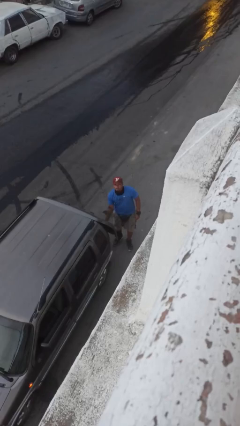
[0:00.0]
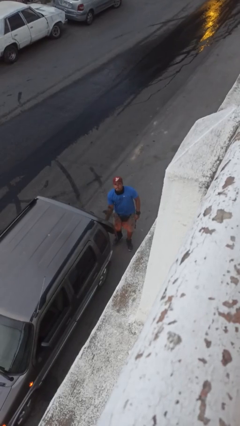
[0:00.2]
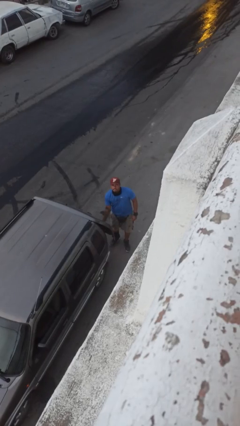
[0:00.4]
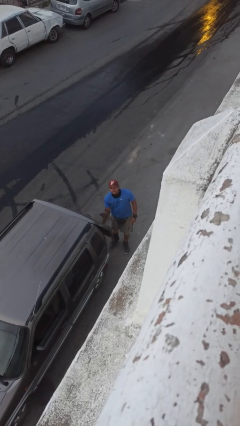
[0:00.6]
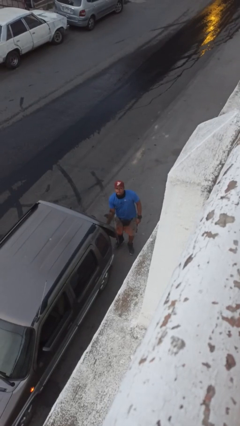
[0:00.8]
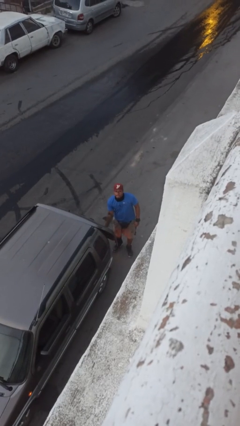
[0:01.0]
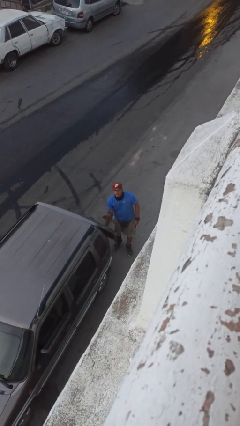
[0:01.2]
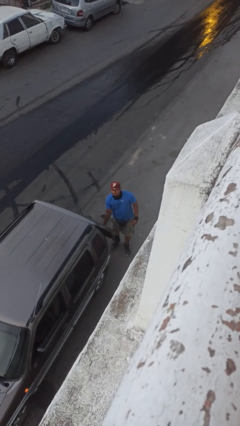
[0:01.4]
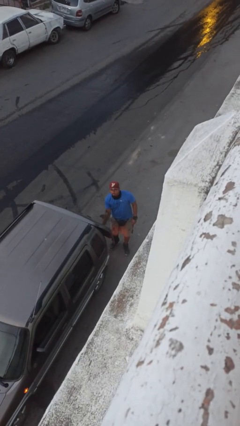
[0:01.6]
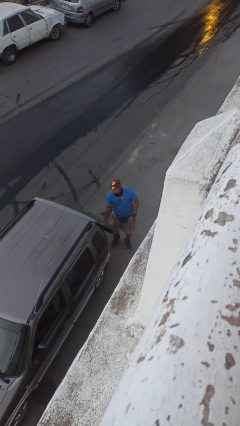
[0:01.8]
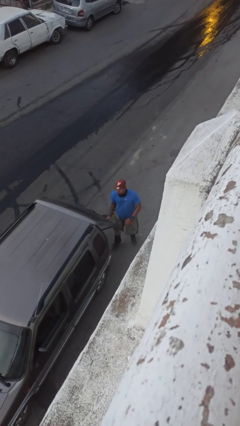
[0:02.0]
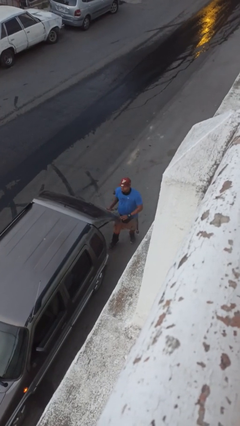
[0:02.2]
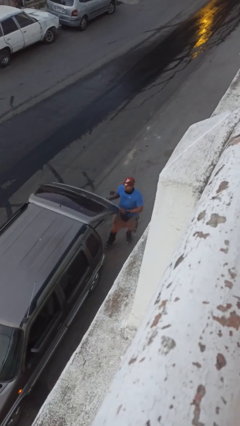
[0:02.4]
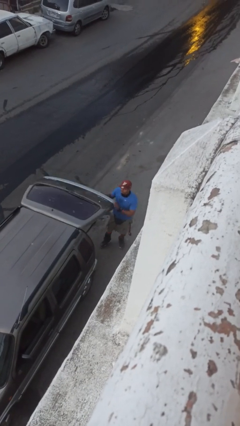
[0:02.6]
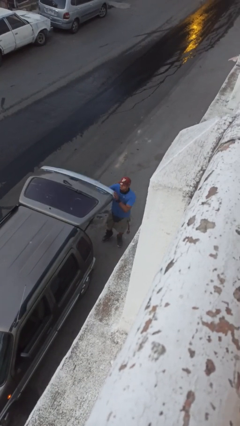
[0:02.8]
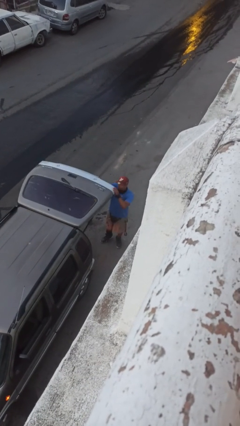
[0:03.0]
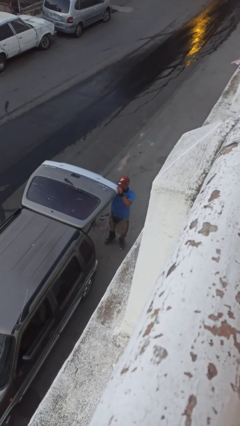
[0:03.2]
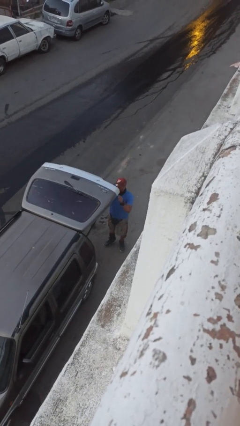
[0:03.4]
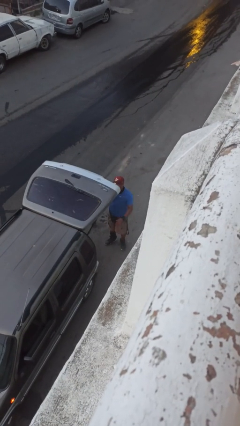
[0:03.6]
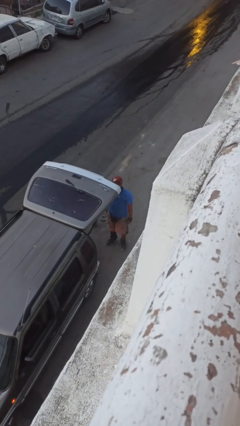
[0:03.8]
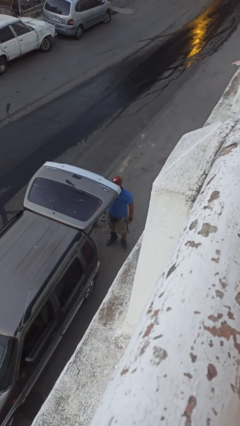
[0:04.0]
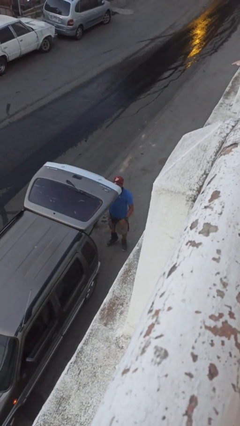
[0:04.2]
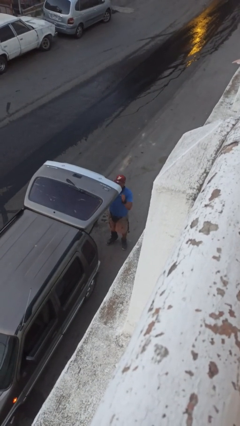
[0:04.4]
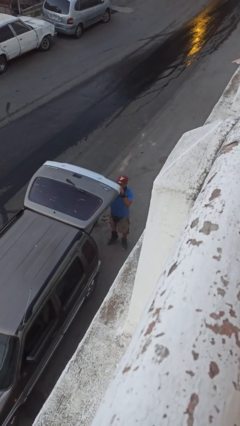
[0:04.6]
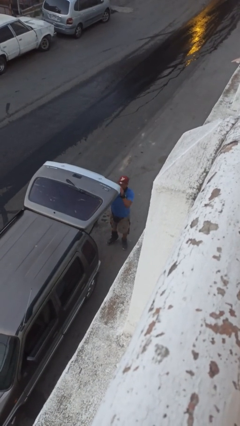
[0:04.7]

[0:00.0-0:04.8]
person opens car trunk

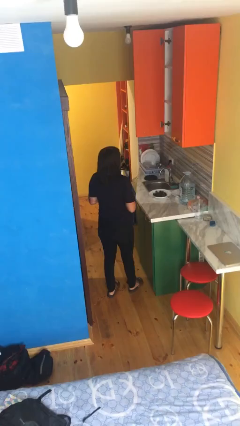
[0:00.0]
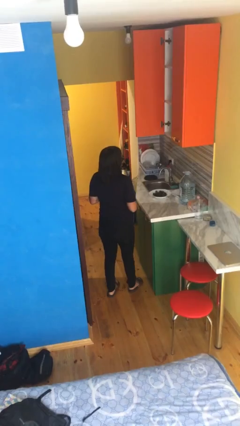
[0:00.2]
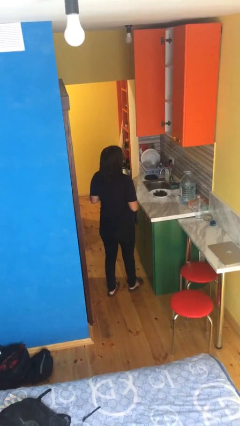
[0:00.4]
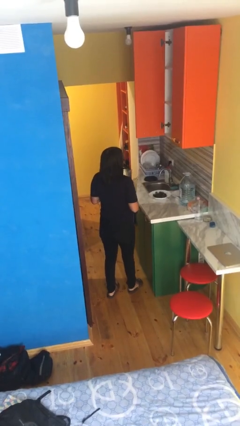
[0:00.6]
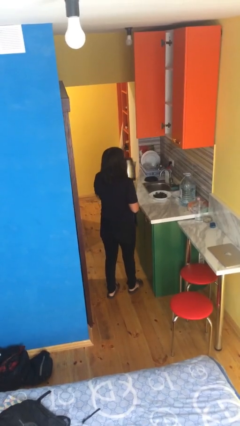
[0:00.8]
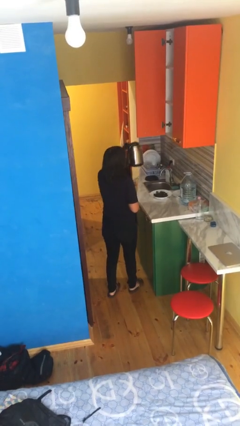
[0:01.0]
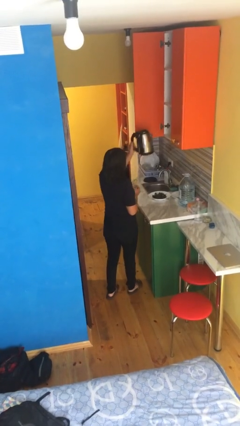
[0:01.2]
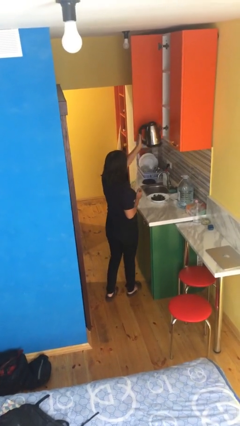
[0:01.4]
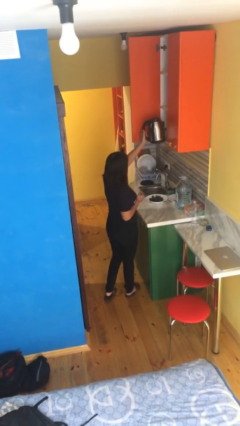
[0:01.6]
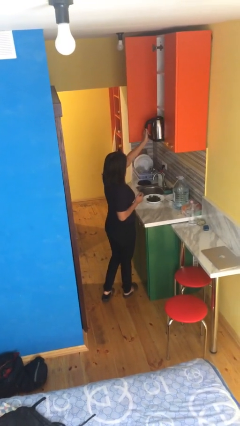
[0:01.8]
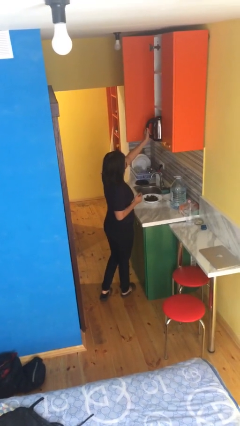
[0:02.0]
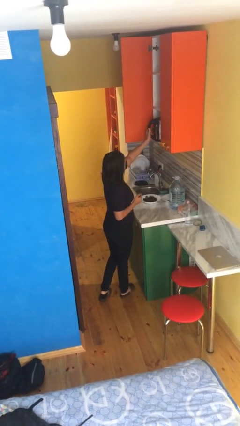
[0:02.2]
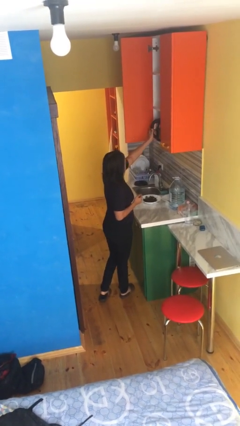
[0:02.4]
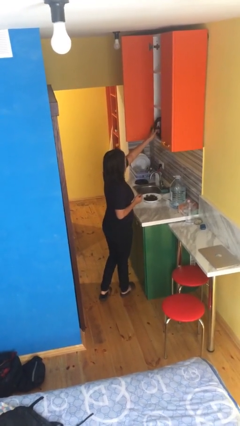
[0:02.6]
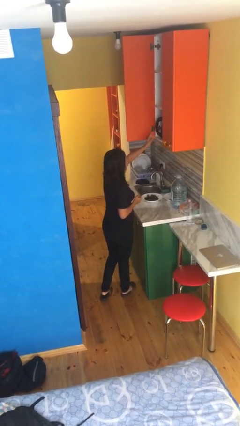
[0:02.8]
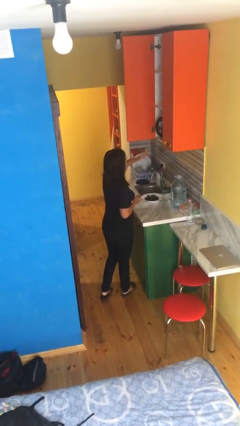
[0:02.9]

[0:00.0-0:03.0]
person puts down object into cabinet

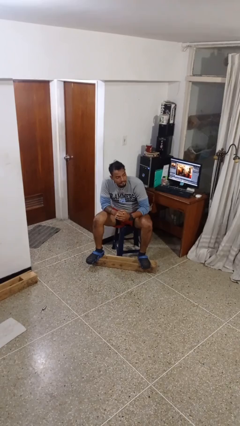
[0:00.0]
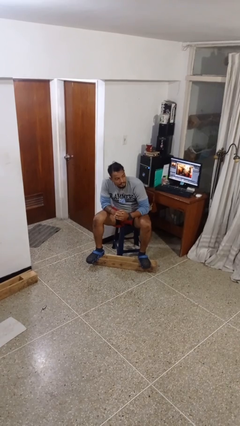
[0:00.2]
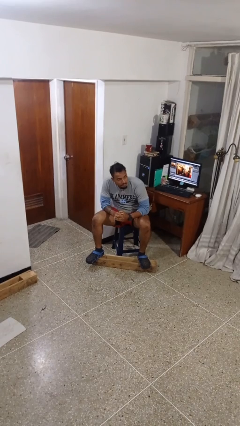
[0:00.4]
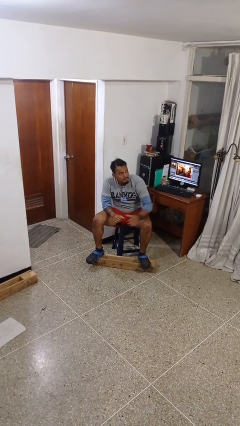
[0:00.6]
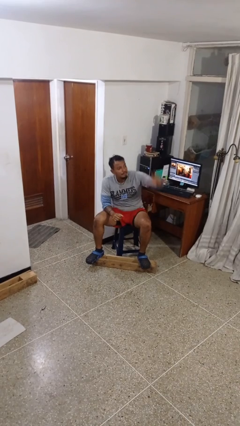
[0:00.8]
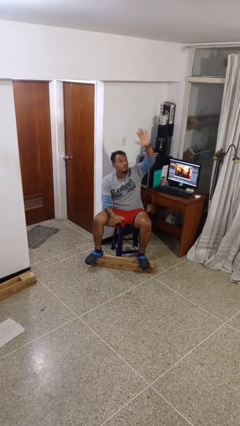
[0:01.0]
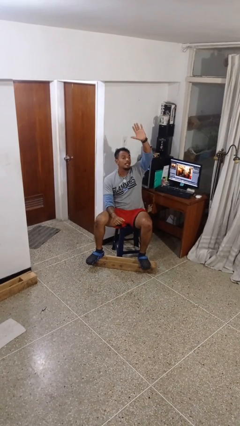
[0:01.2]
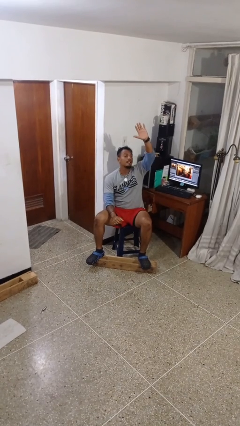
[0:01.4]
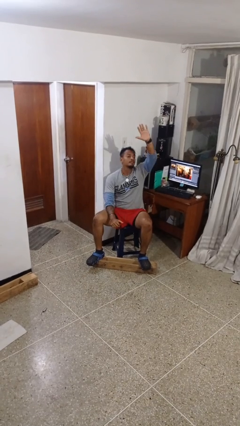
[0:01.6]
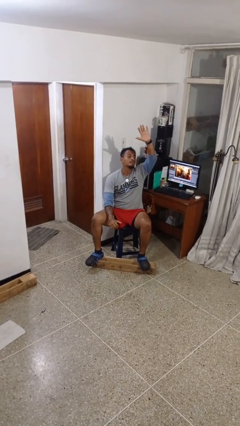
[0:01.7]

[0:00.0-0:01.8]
person gestures raise hand

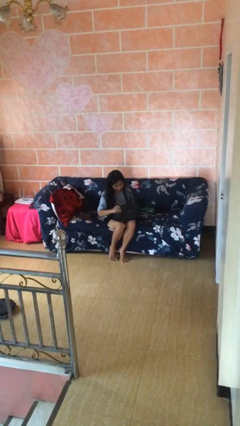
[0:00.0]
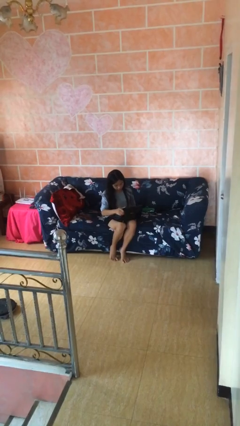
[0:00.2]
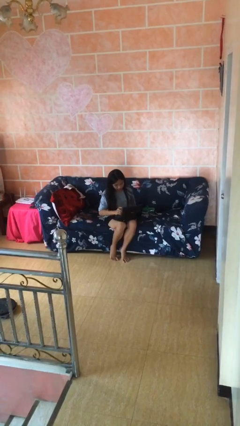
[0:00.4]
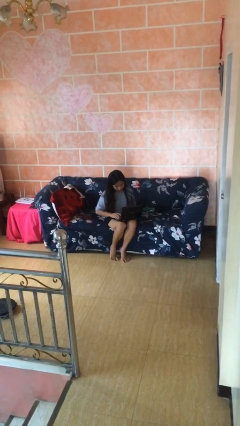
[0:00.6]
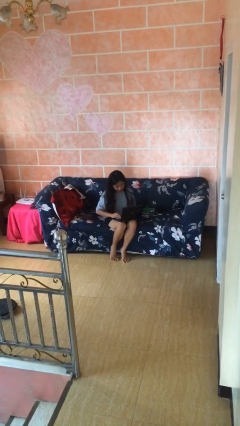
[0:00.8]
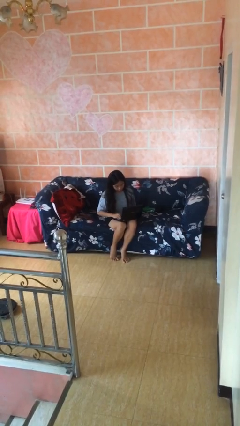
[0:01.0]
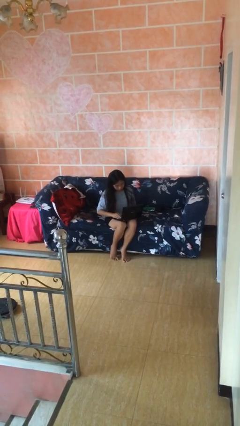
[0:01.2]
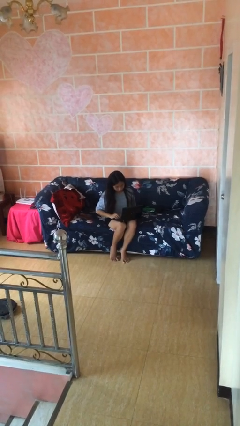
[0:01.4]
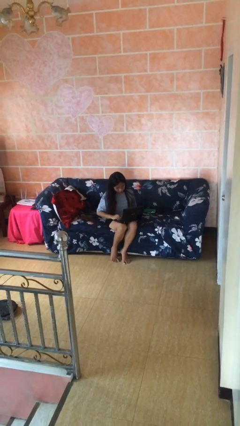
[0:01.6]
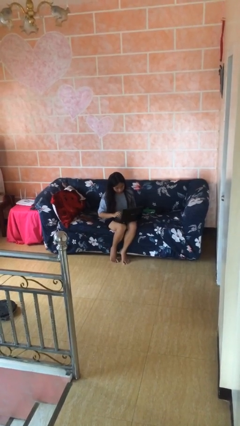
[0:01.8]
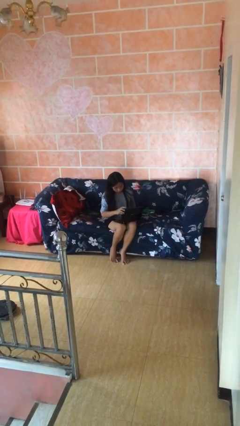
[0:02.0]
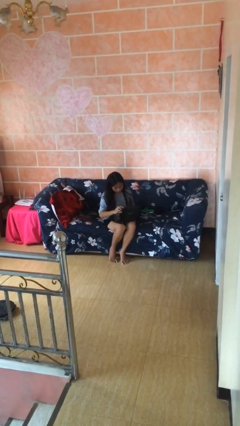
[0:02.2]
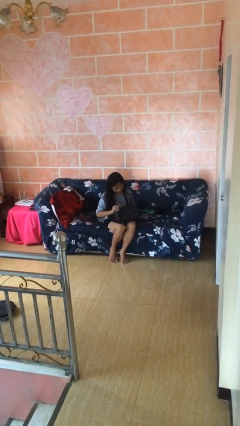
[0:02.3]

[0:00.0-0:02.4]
person interacts with laptop

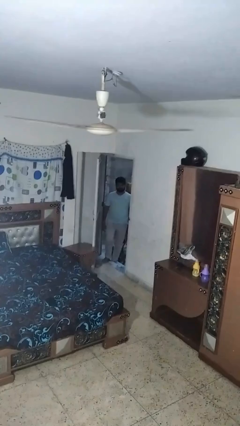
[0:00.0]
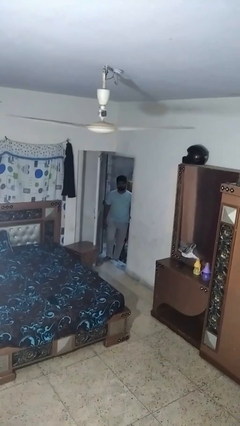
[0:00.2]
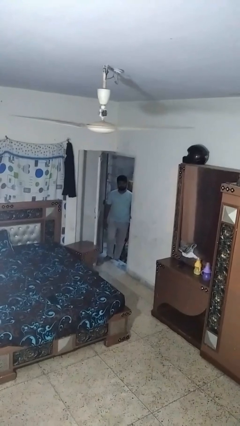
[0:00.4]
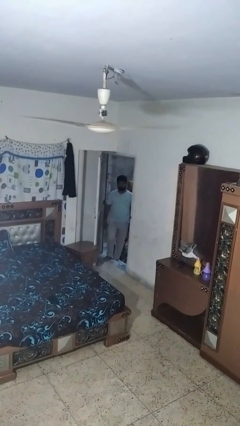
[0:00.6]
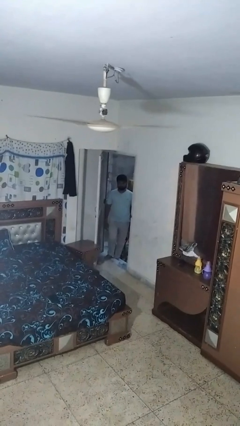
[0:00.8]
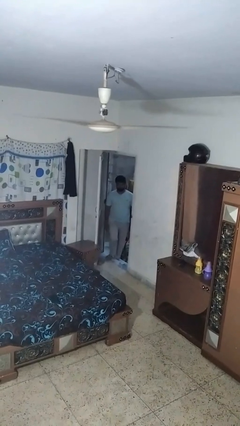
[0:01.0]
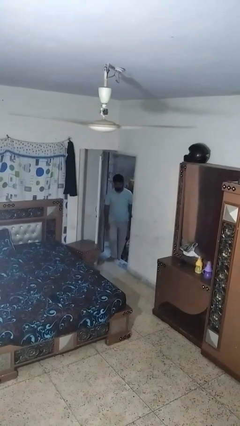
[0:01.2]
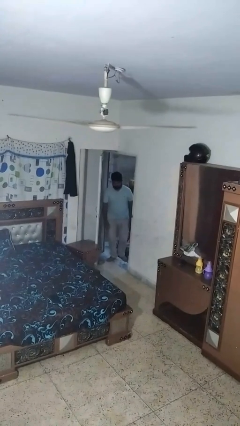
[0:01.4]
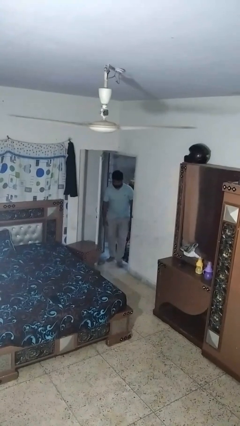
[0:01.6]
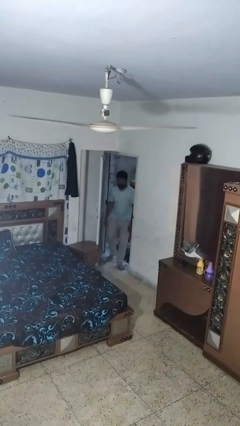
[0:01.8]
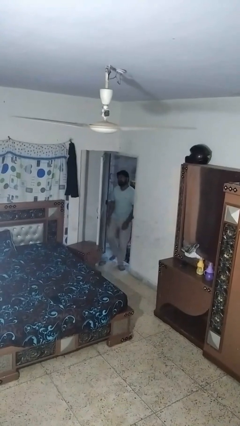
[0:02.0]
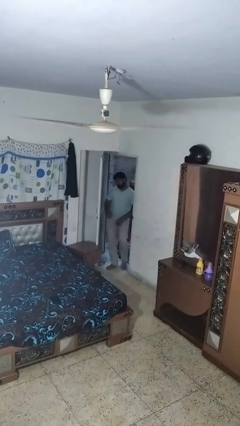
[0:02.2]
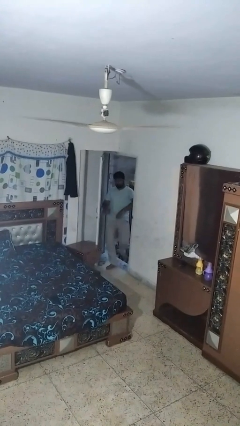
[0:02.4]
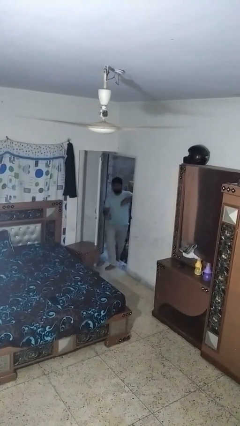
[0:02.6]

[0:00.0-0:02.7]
person bumps into wall

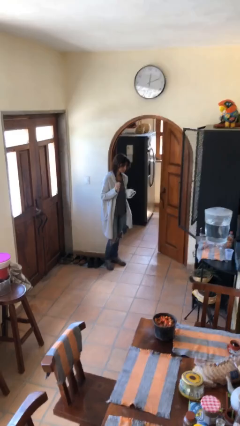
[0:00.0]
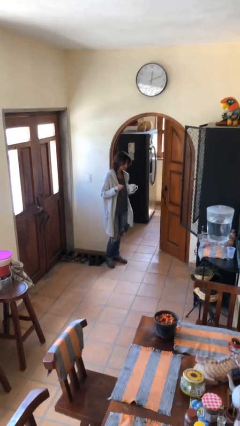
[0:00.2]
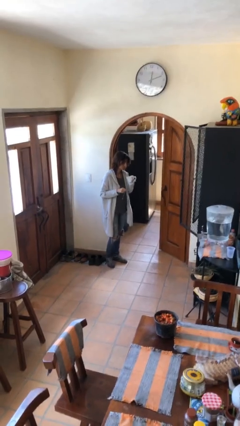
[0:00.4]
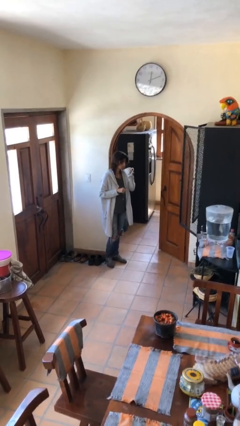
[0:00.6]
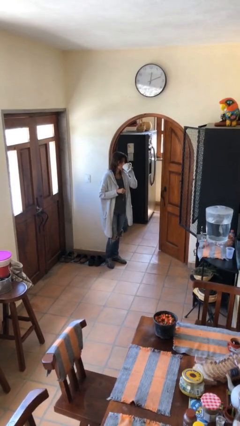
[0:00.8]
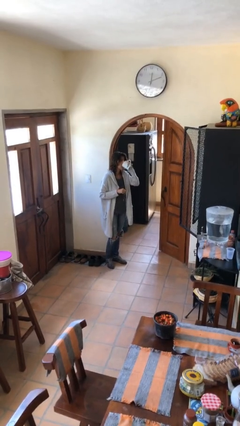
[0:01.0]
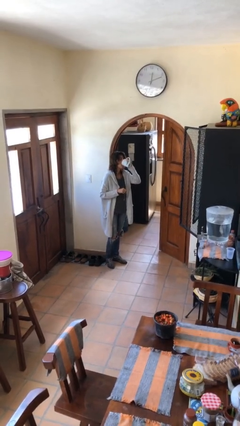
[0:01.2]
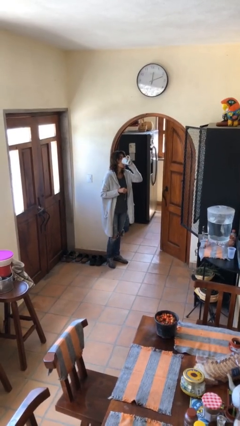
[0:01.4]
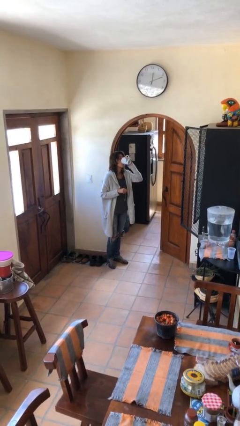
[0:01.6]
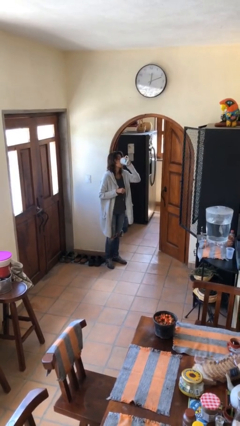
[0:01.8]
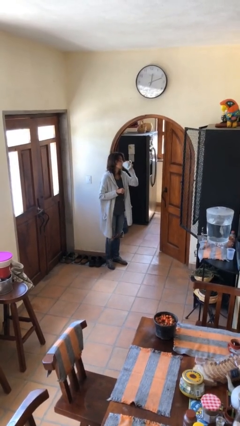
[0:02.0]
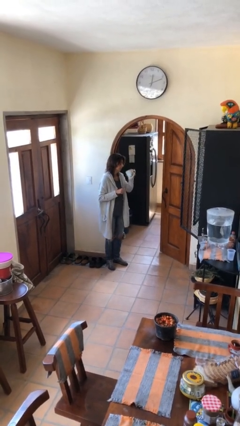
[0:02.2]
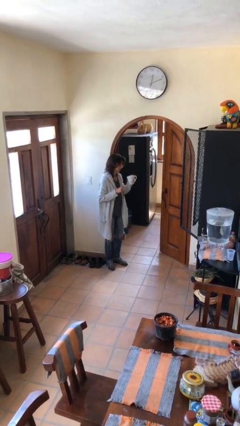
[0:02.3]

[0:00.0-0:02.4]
person drinks from mug

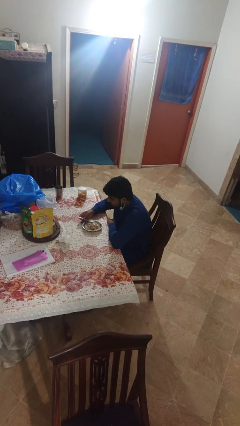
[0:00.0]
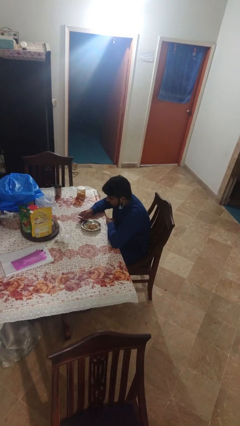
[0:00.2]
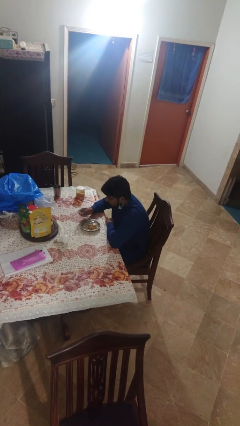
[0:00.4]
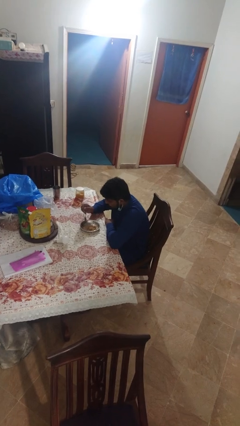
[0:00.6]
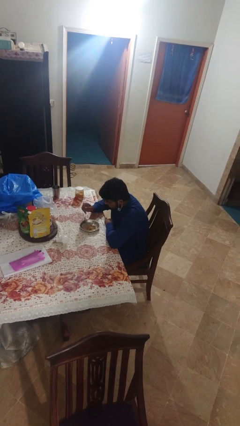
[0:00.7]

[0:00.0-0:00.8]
person eats with utensil
